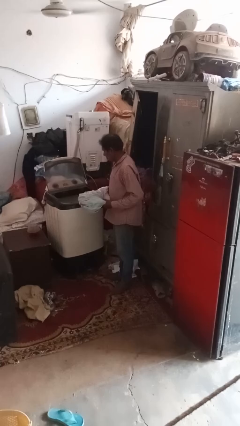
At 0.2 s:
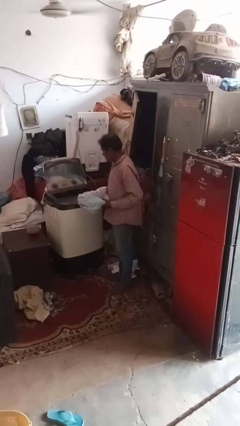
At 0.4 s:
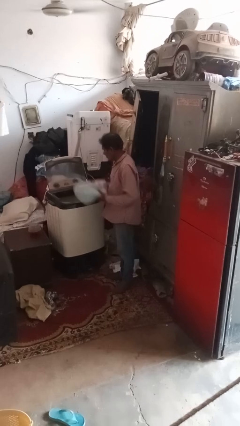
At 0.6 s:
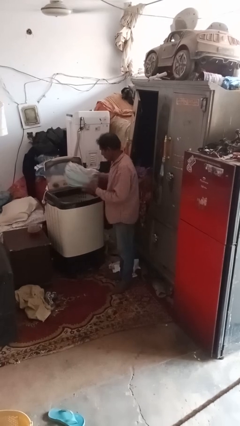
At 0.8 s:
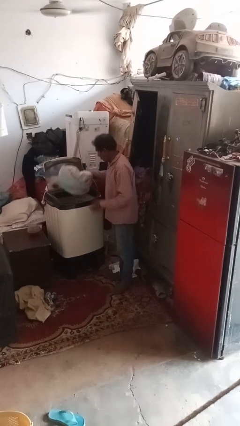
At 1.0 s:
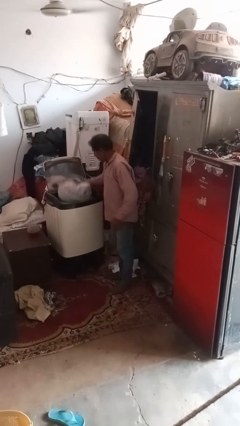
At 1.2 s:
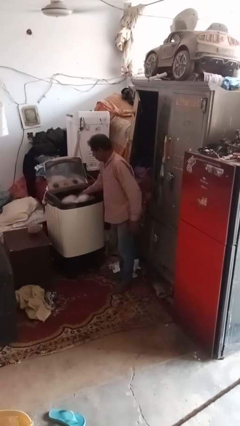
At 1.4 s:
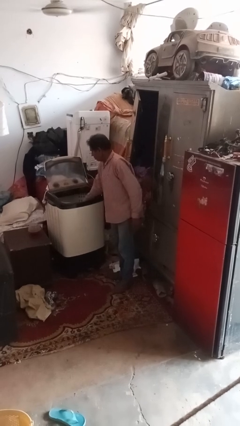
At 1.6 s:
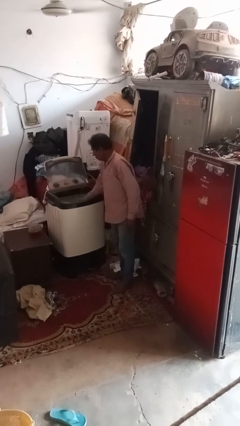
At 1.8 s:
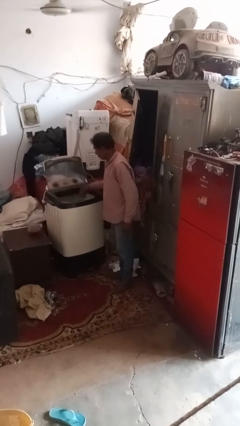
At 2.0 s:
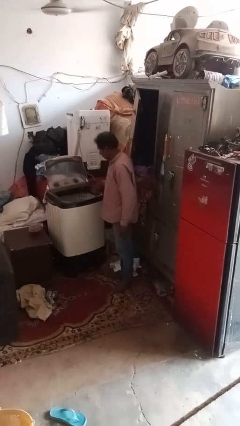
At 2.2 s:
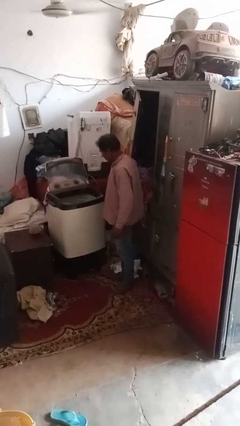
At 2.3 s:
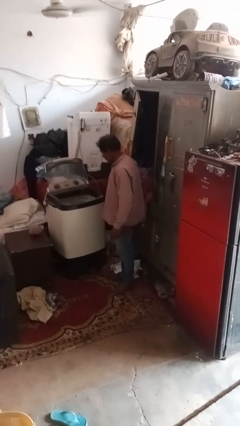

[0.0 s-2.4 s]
person loads clotheswasher

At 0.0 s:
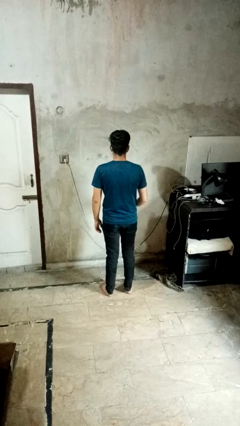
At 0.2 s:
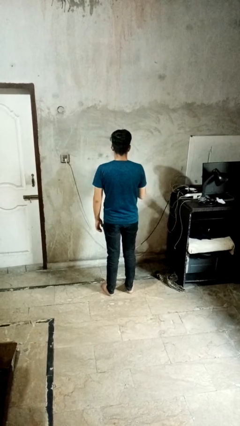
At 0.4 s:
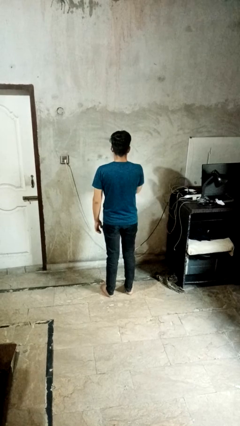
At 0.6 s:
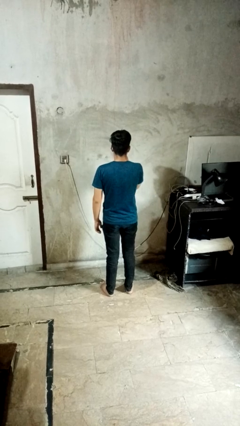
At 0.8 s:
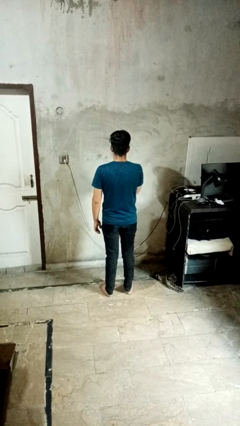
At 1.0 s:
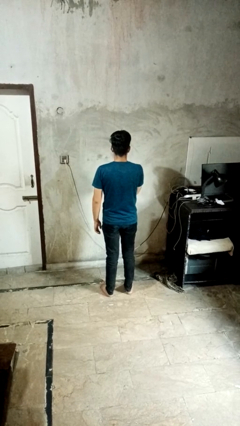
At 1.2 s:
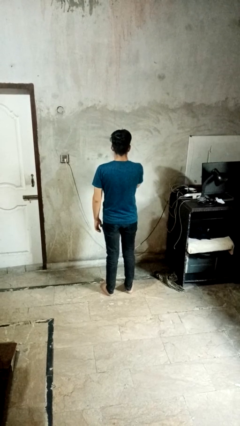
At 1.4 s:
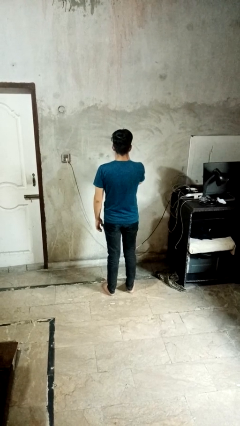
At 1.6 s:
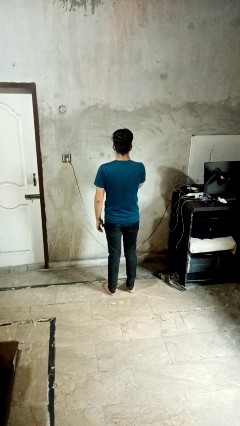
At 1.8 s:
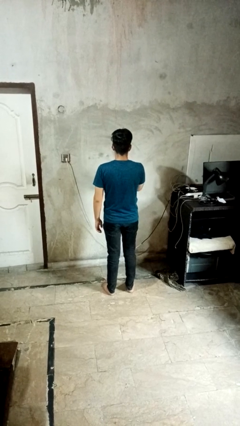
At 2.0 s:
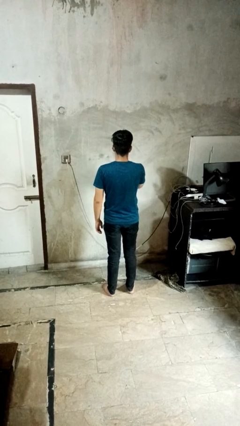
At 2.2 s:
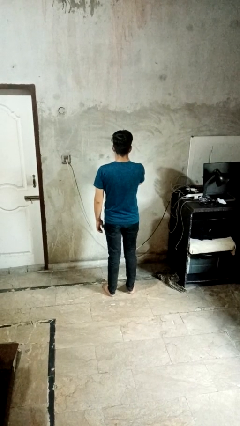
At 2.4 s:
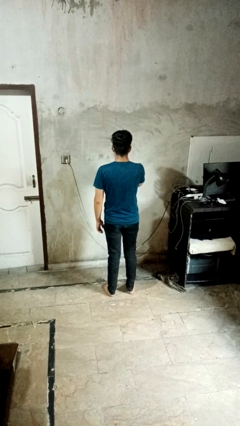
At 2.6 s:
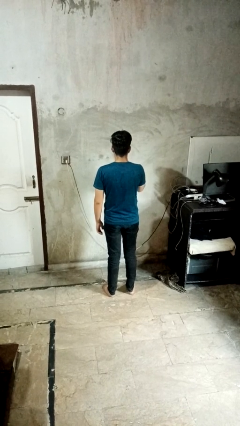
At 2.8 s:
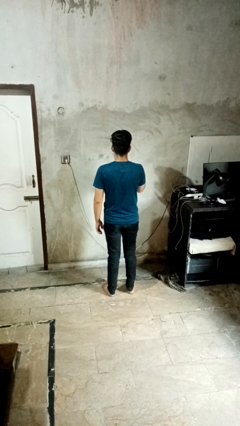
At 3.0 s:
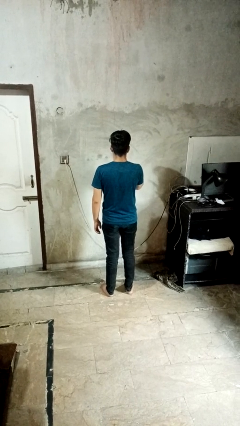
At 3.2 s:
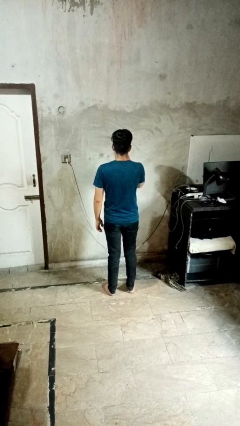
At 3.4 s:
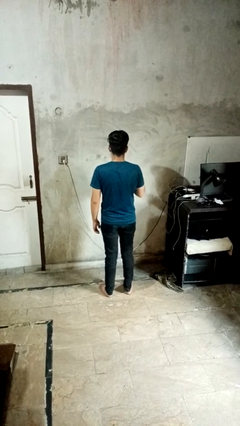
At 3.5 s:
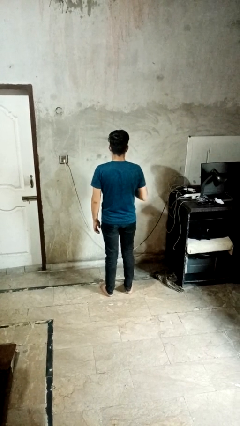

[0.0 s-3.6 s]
person licks fingers

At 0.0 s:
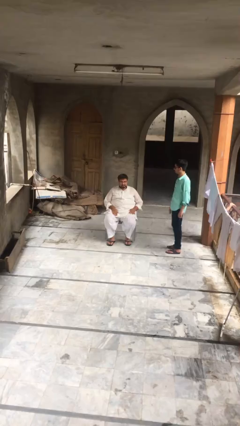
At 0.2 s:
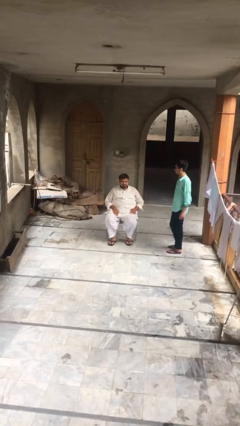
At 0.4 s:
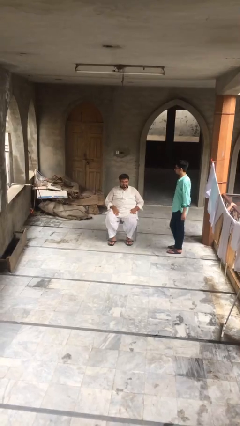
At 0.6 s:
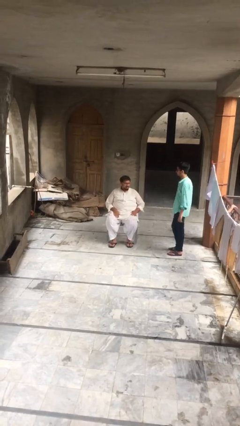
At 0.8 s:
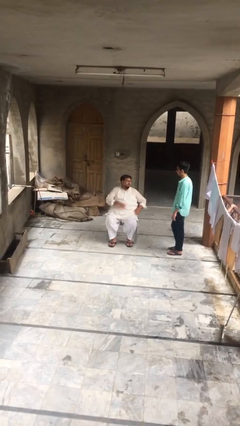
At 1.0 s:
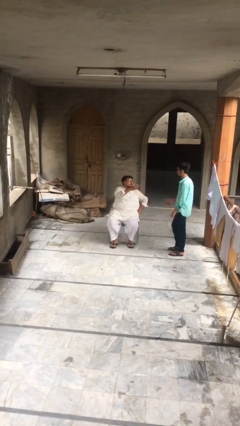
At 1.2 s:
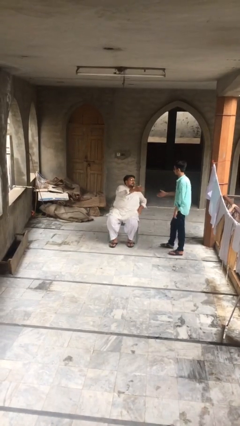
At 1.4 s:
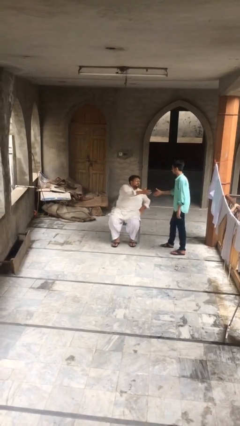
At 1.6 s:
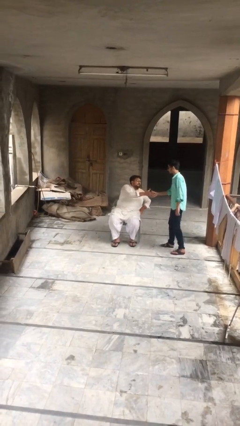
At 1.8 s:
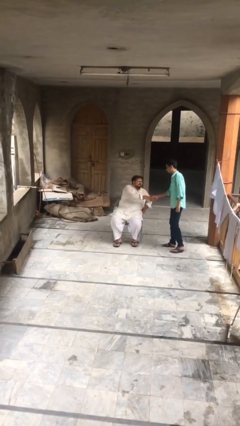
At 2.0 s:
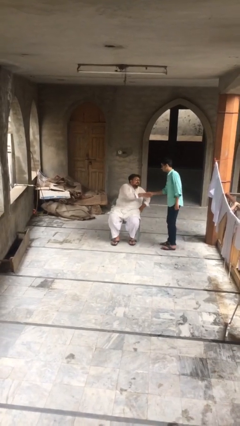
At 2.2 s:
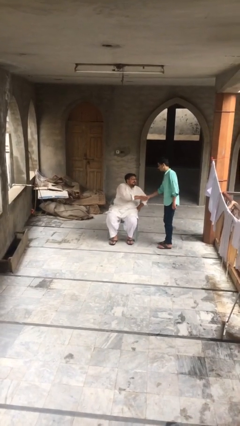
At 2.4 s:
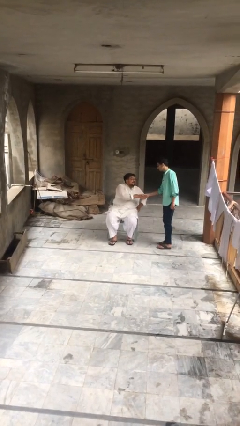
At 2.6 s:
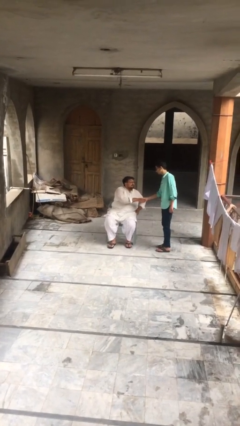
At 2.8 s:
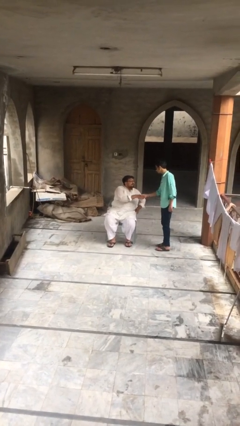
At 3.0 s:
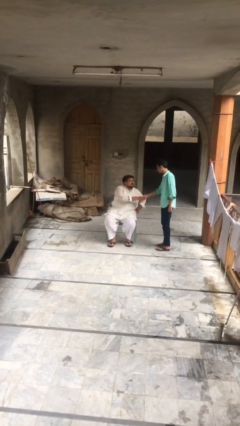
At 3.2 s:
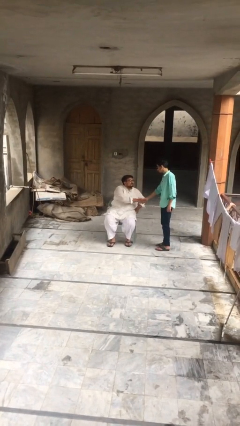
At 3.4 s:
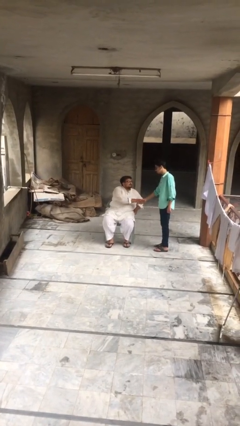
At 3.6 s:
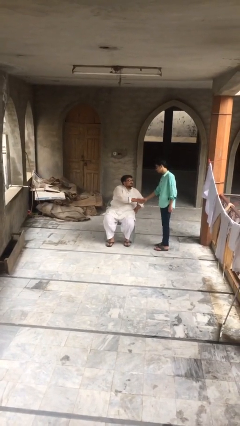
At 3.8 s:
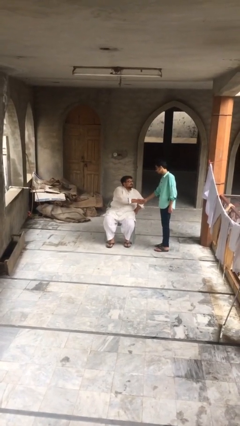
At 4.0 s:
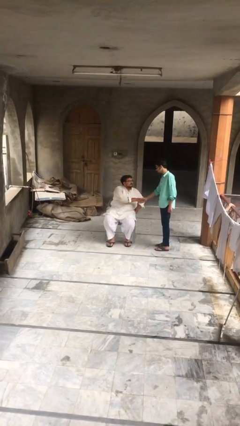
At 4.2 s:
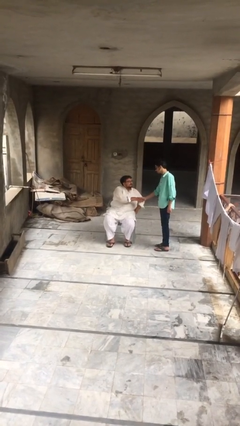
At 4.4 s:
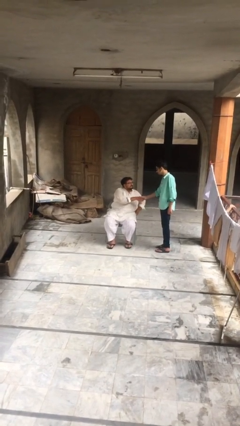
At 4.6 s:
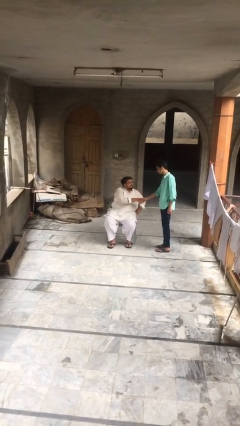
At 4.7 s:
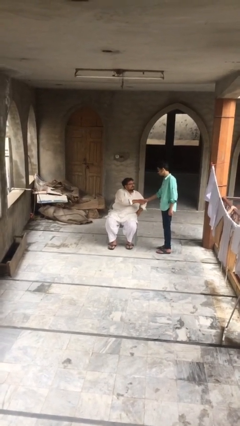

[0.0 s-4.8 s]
person shakes hand

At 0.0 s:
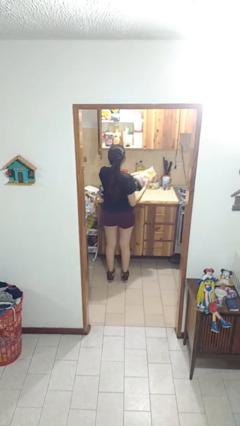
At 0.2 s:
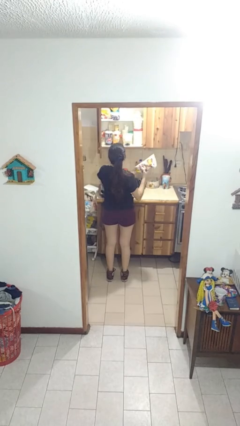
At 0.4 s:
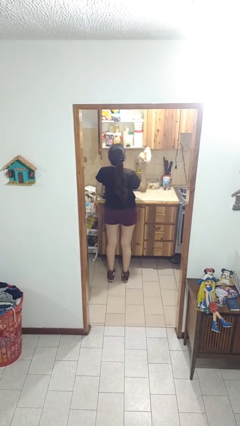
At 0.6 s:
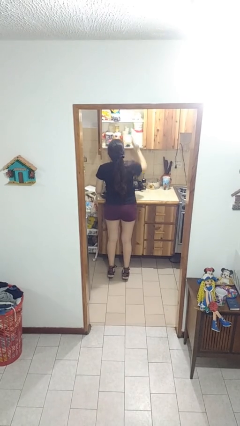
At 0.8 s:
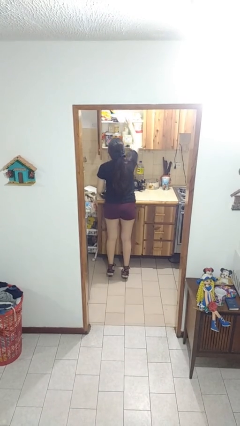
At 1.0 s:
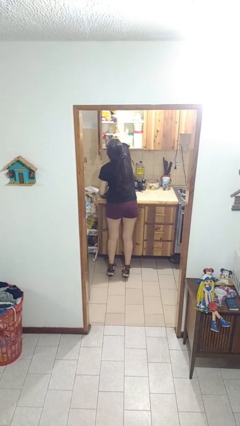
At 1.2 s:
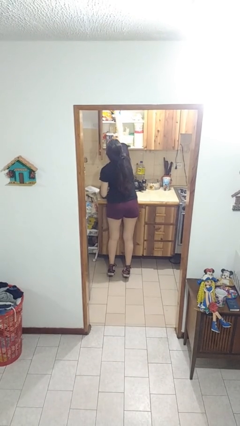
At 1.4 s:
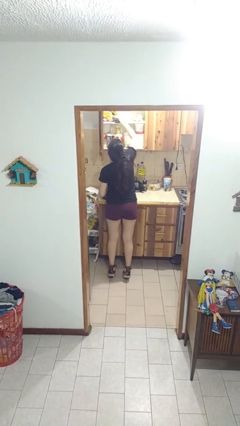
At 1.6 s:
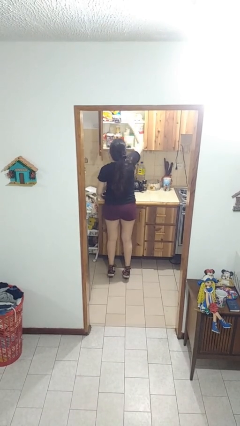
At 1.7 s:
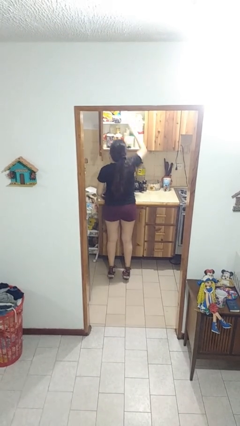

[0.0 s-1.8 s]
person puts object in cabinet

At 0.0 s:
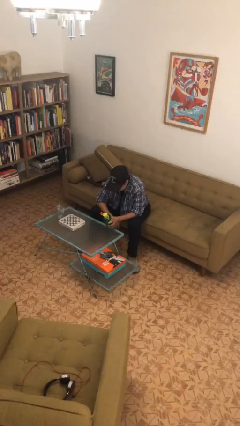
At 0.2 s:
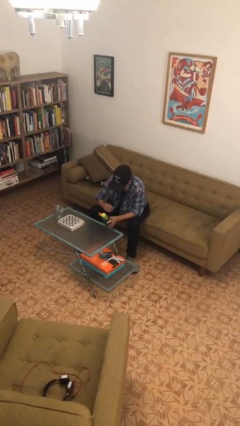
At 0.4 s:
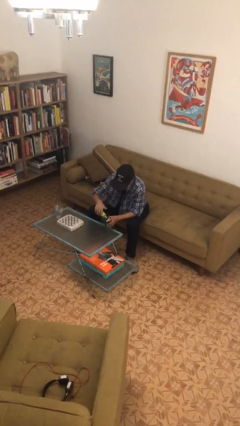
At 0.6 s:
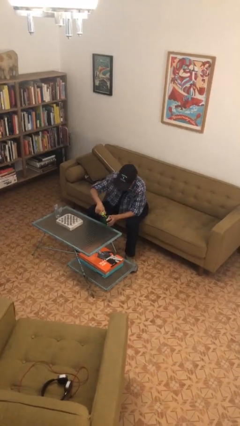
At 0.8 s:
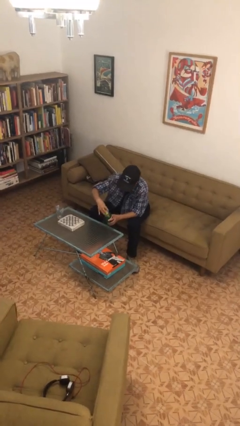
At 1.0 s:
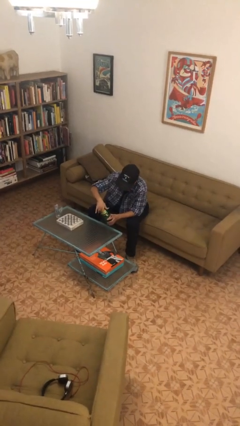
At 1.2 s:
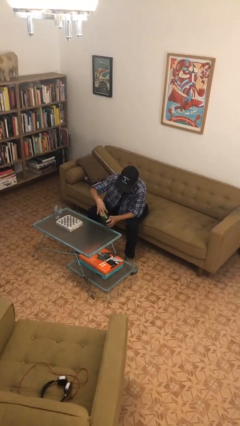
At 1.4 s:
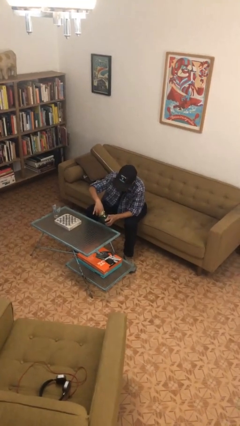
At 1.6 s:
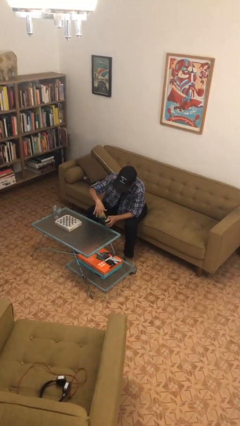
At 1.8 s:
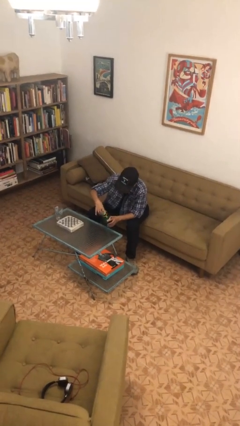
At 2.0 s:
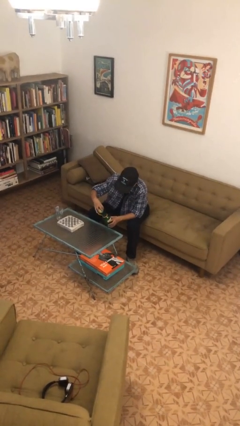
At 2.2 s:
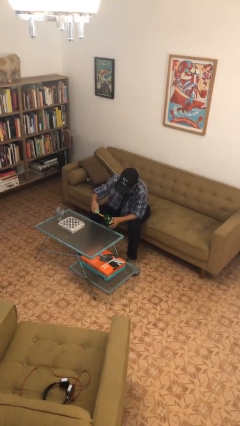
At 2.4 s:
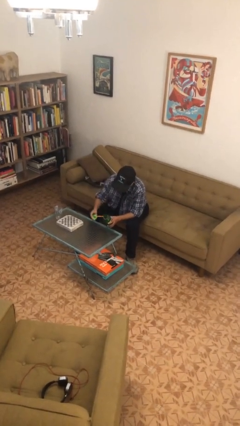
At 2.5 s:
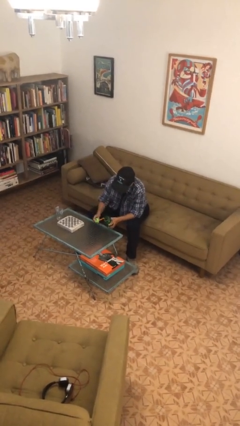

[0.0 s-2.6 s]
person unscrews lid from bottle

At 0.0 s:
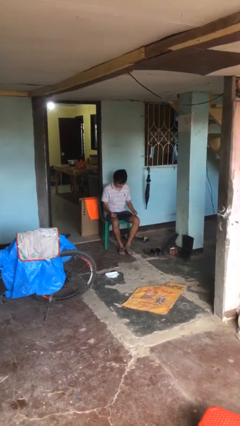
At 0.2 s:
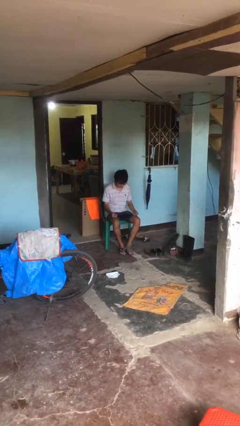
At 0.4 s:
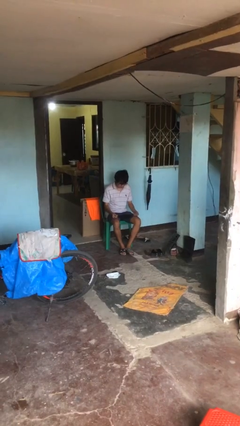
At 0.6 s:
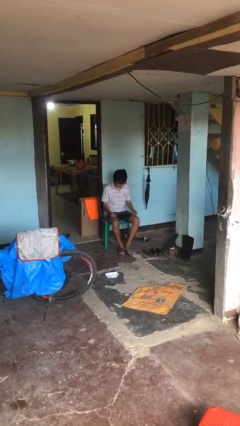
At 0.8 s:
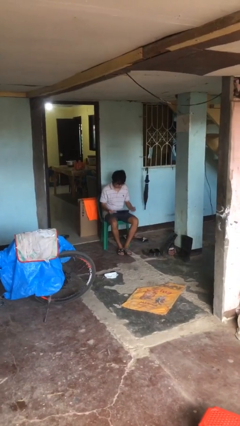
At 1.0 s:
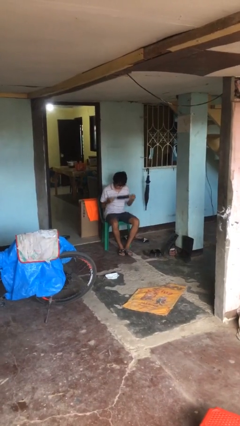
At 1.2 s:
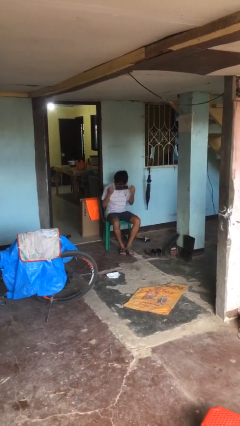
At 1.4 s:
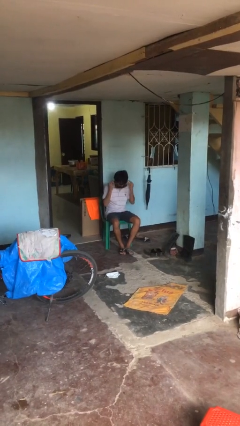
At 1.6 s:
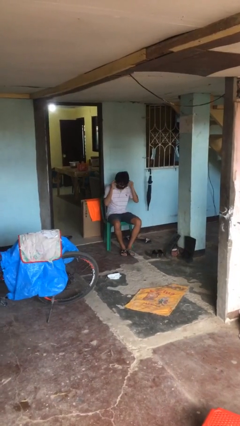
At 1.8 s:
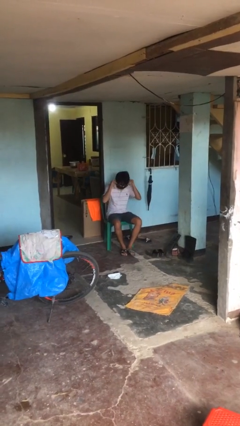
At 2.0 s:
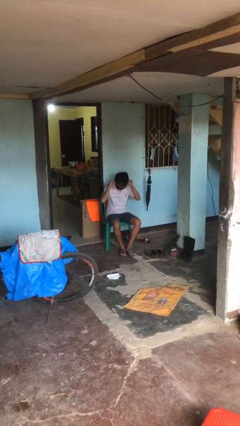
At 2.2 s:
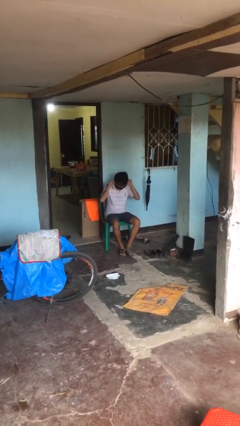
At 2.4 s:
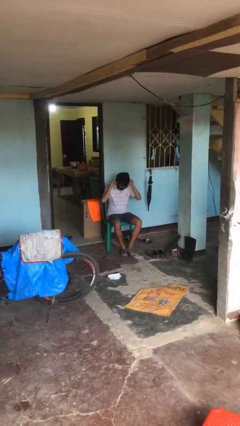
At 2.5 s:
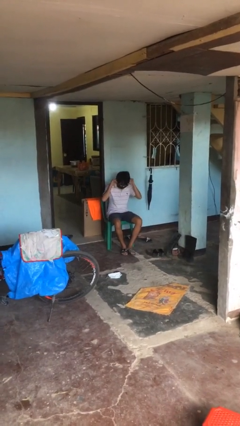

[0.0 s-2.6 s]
person puts on facemask
